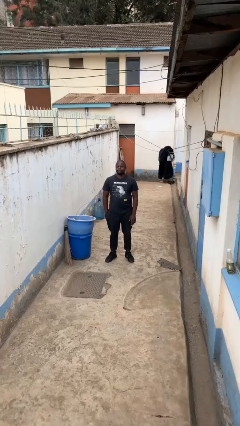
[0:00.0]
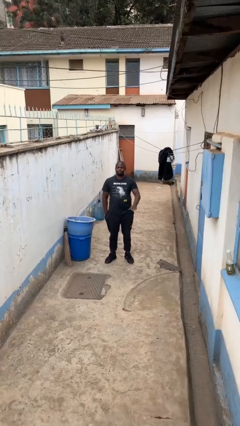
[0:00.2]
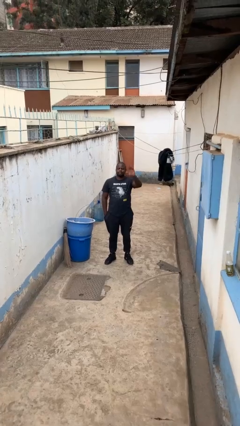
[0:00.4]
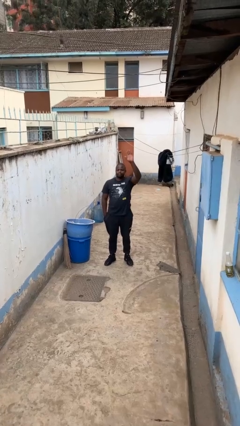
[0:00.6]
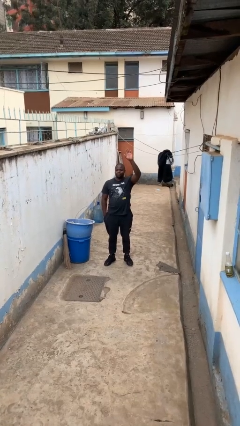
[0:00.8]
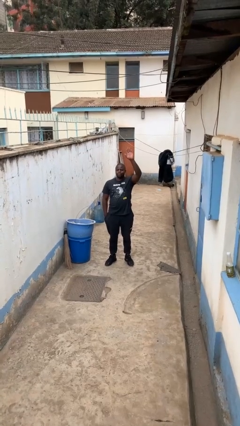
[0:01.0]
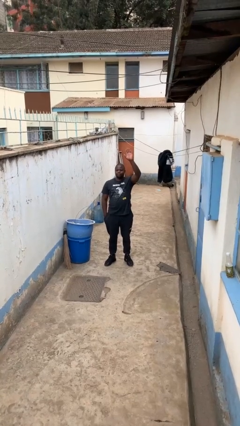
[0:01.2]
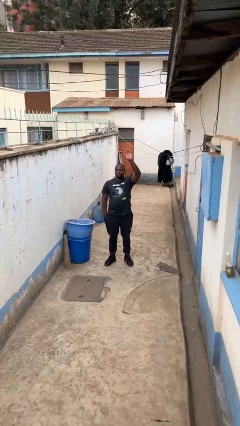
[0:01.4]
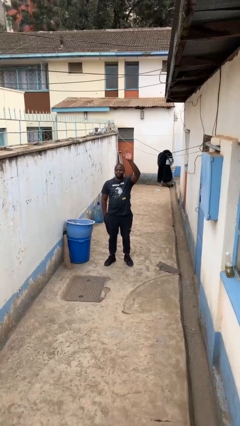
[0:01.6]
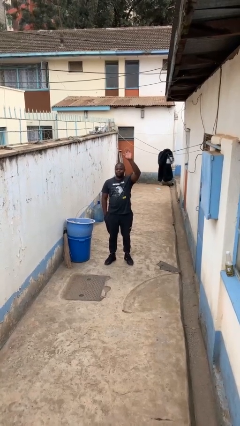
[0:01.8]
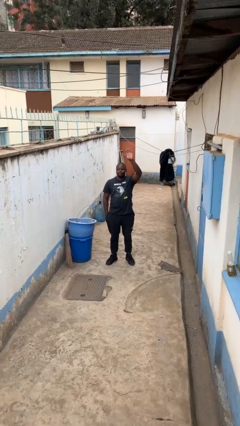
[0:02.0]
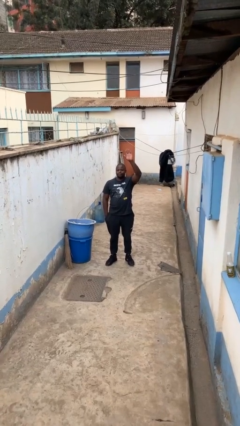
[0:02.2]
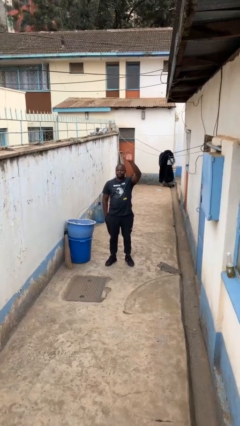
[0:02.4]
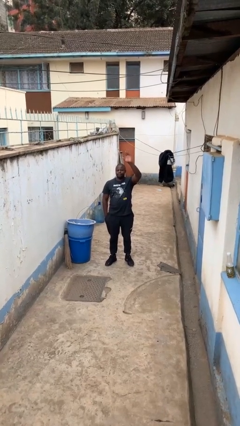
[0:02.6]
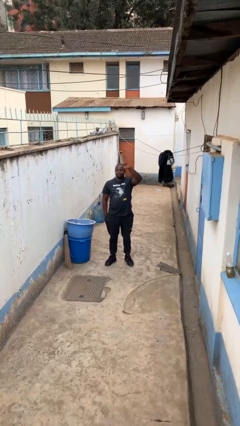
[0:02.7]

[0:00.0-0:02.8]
person gestures raise hand

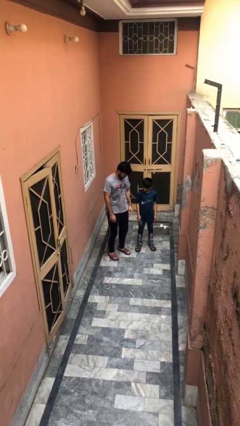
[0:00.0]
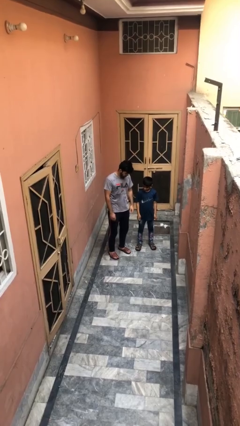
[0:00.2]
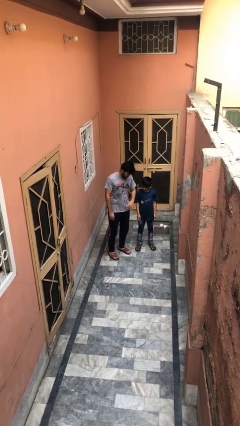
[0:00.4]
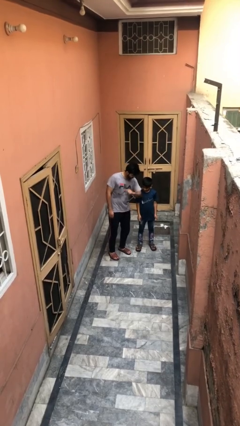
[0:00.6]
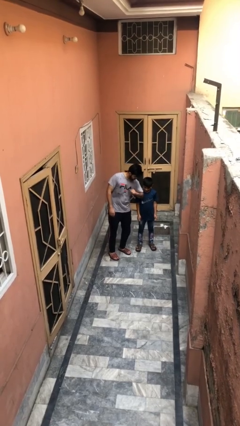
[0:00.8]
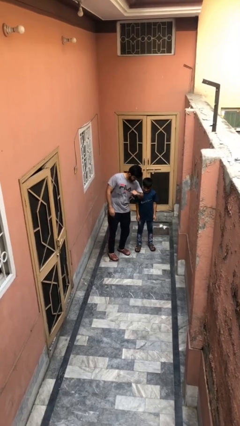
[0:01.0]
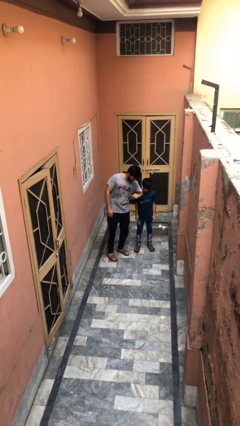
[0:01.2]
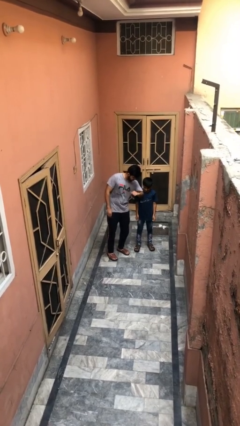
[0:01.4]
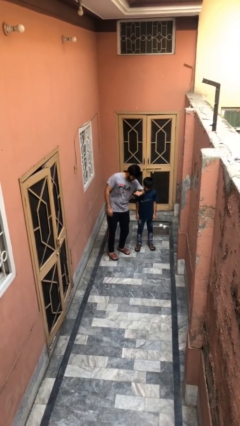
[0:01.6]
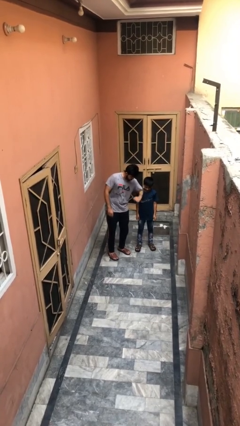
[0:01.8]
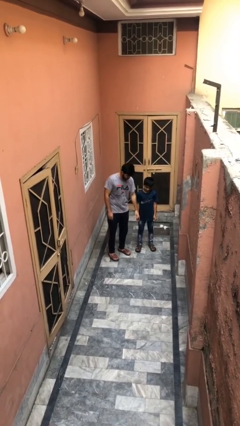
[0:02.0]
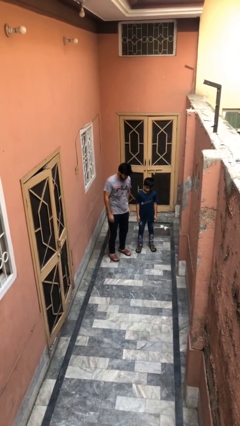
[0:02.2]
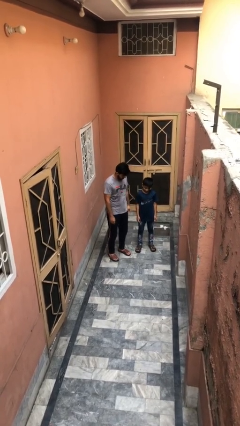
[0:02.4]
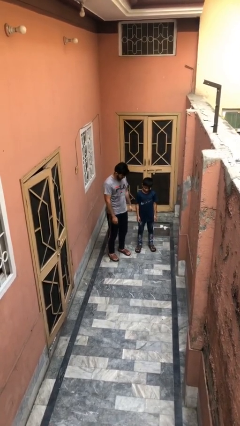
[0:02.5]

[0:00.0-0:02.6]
person nudges person with elbow

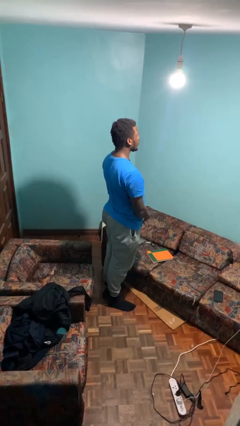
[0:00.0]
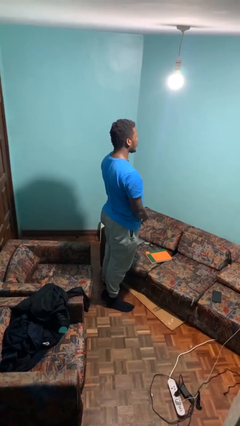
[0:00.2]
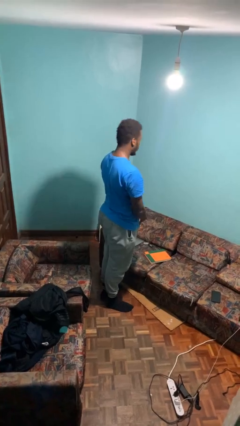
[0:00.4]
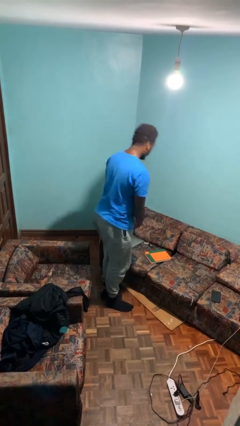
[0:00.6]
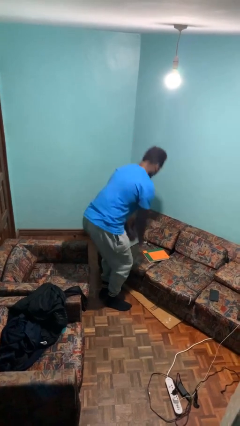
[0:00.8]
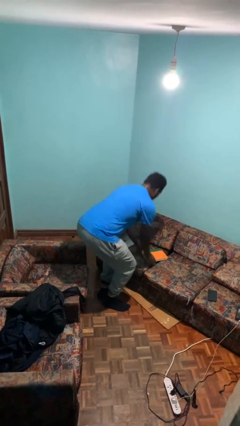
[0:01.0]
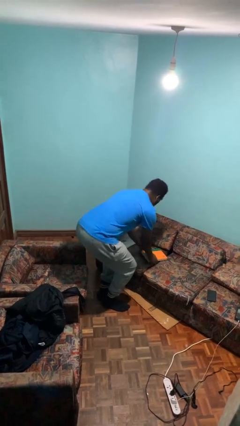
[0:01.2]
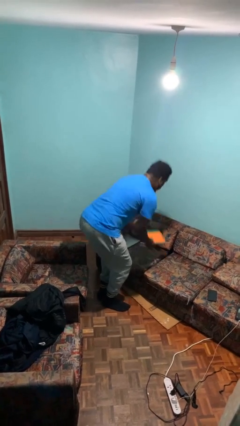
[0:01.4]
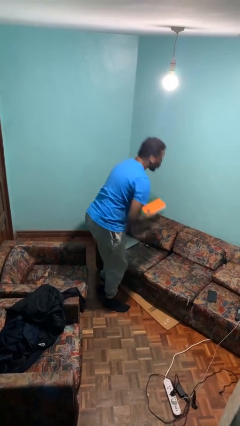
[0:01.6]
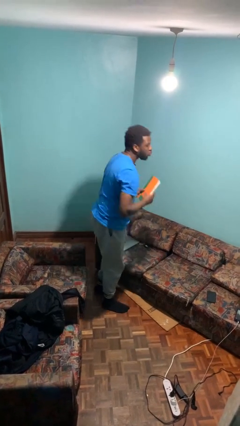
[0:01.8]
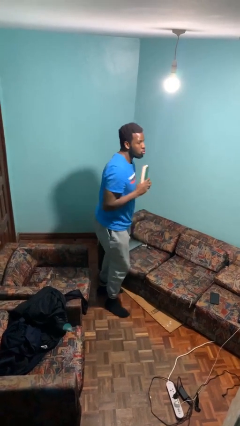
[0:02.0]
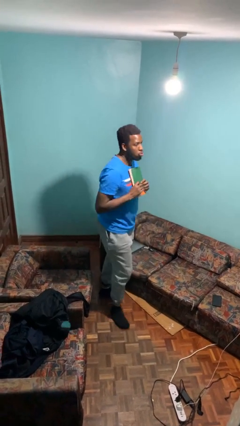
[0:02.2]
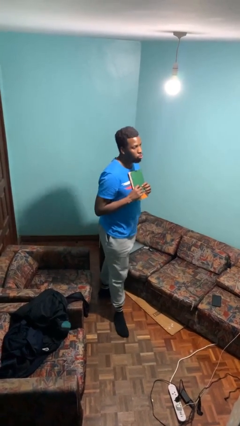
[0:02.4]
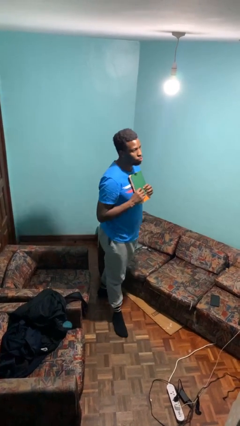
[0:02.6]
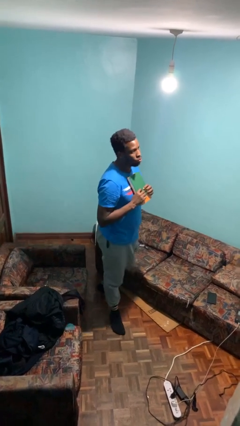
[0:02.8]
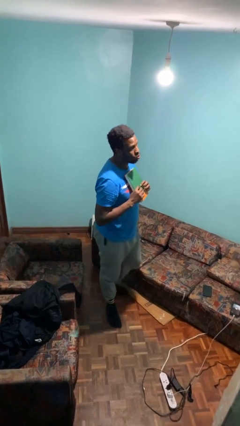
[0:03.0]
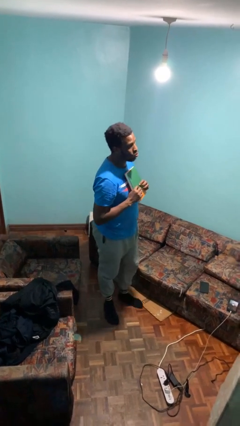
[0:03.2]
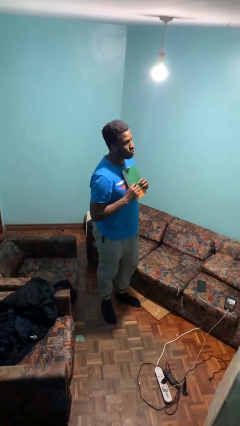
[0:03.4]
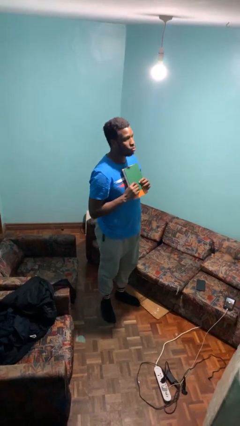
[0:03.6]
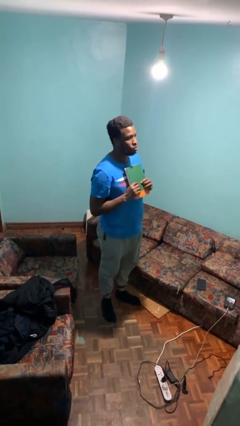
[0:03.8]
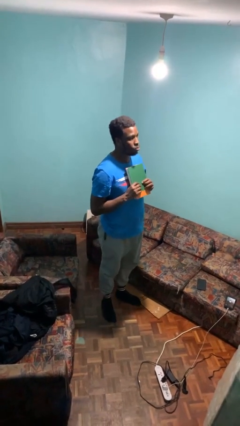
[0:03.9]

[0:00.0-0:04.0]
person picks up object from couch

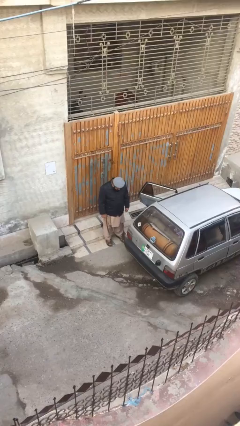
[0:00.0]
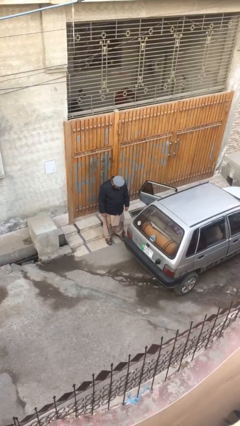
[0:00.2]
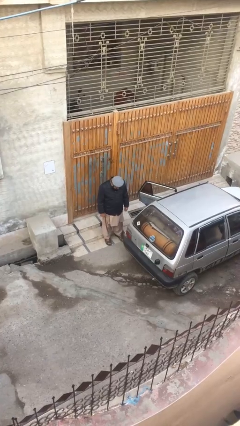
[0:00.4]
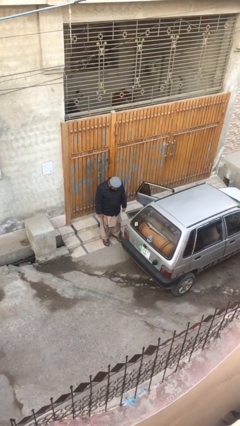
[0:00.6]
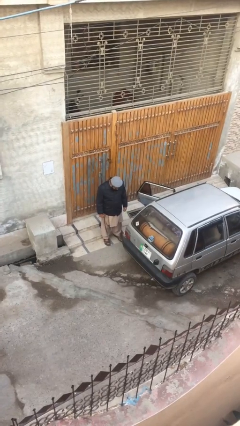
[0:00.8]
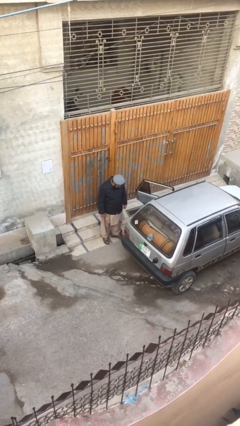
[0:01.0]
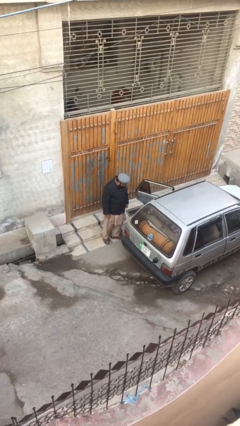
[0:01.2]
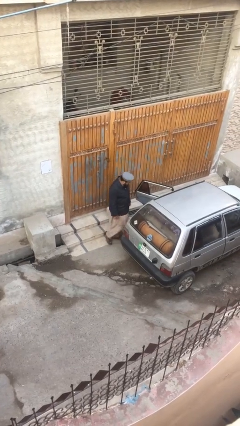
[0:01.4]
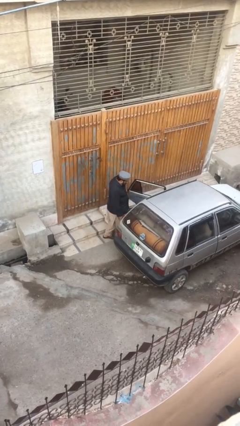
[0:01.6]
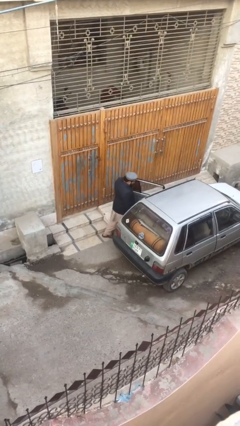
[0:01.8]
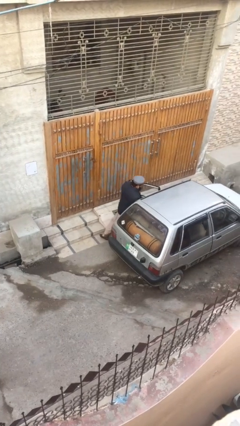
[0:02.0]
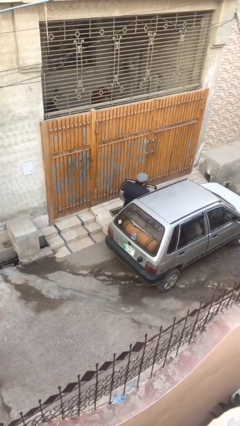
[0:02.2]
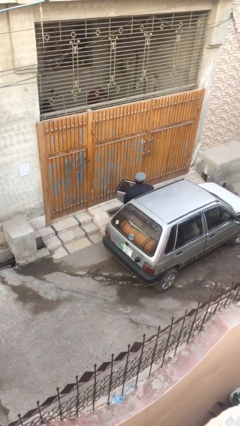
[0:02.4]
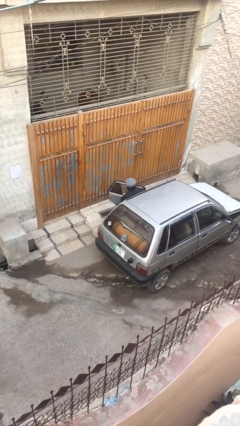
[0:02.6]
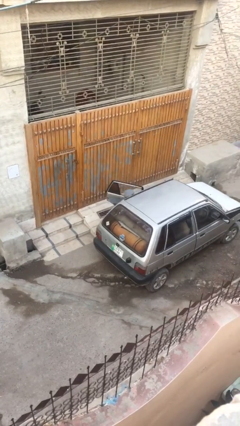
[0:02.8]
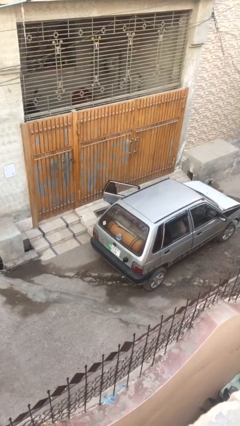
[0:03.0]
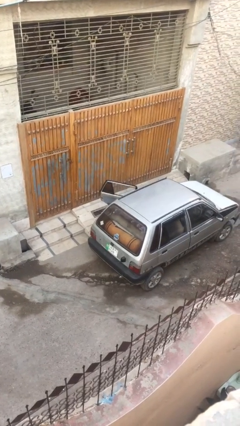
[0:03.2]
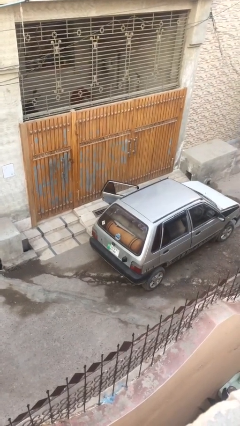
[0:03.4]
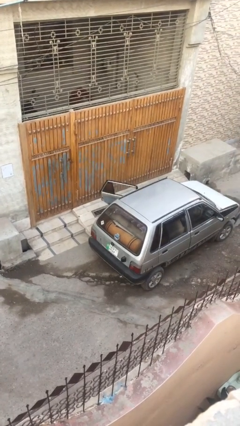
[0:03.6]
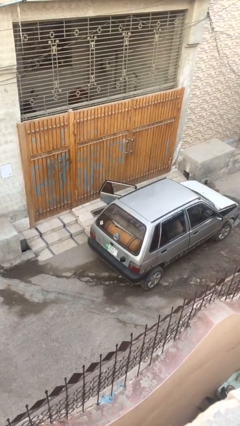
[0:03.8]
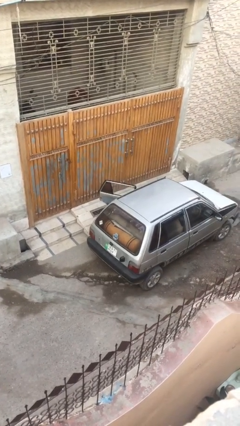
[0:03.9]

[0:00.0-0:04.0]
person enters car

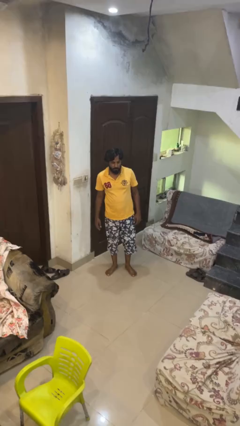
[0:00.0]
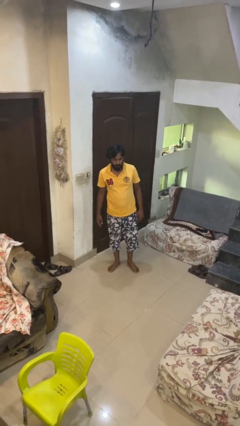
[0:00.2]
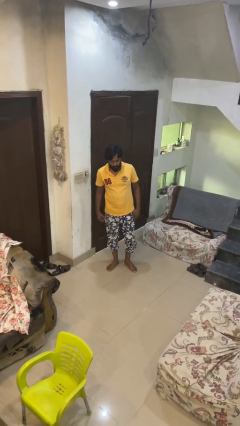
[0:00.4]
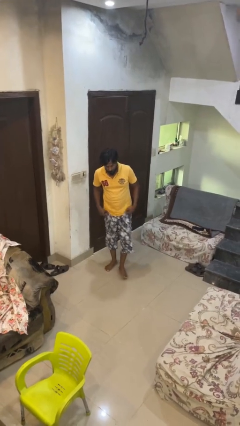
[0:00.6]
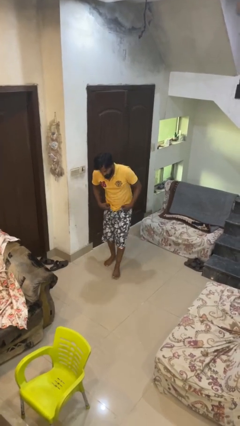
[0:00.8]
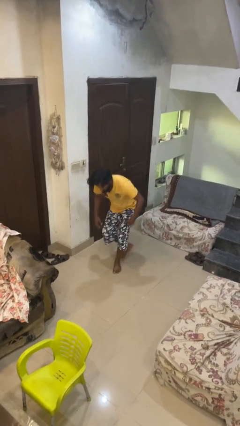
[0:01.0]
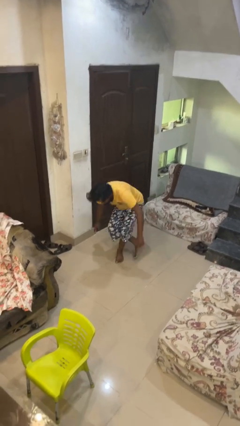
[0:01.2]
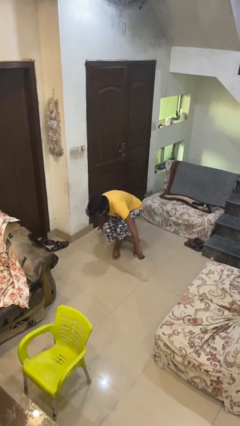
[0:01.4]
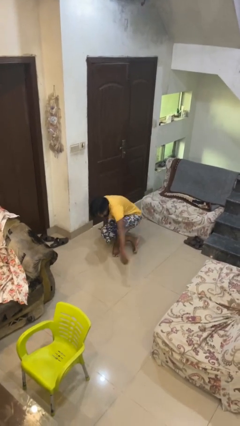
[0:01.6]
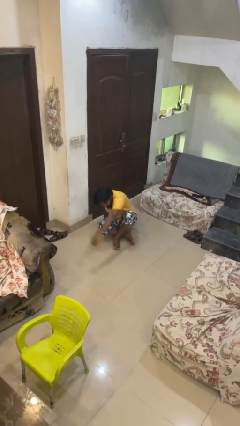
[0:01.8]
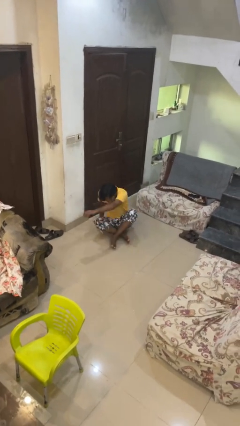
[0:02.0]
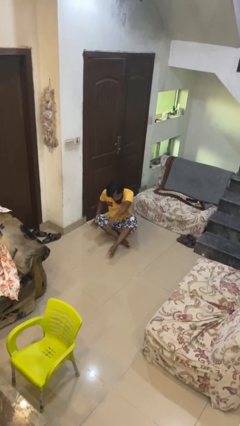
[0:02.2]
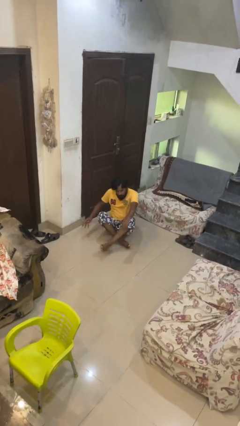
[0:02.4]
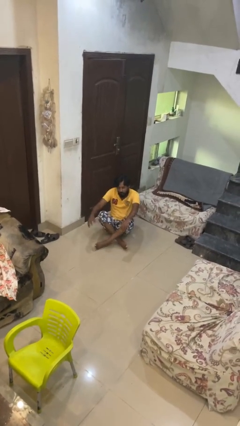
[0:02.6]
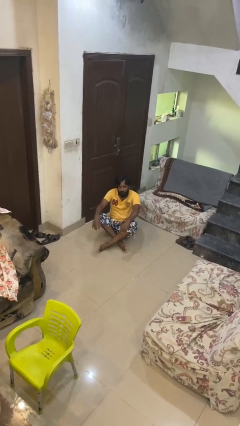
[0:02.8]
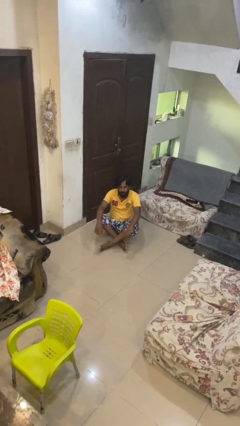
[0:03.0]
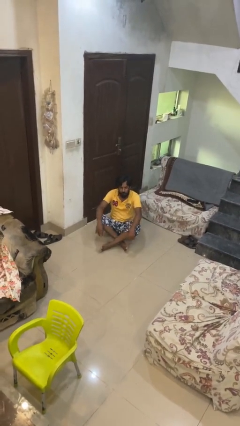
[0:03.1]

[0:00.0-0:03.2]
person sits crisscross

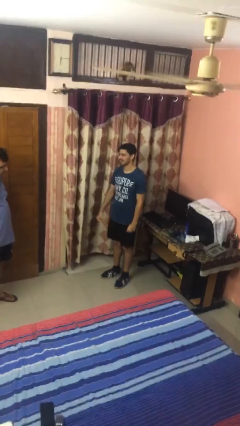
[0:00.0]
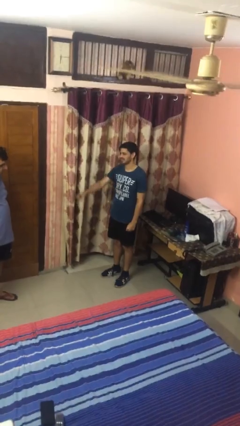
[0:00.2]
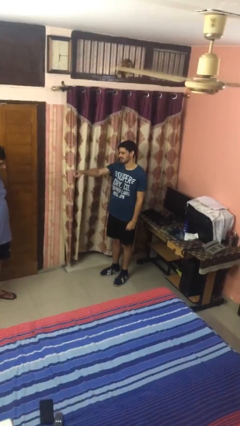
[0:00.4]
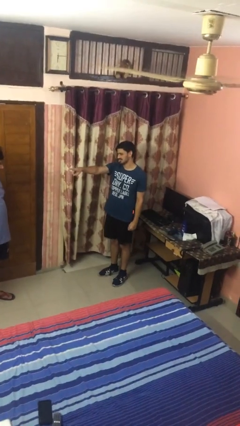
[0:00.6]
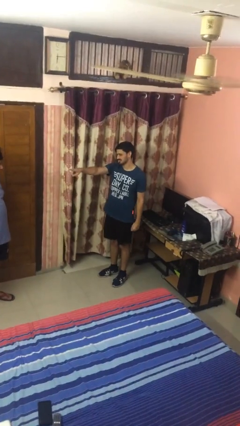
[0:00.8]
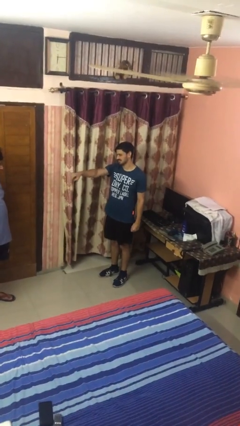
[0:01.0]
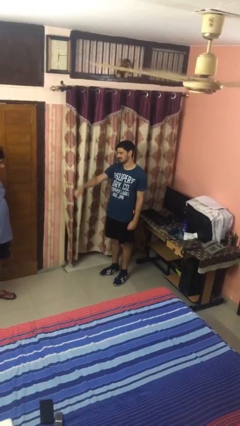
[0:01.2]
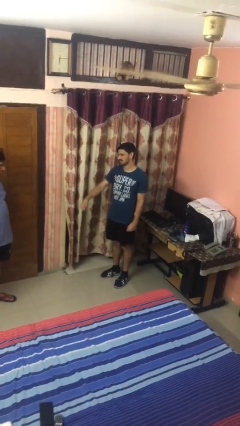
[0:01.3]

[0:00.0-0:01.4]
person points at person
